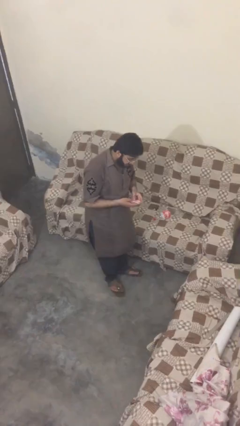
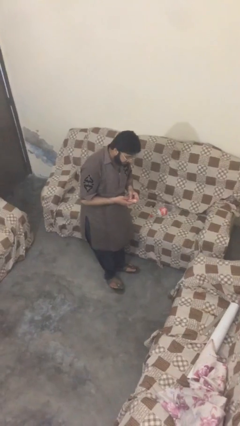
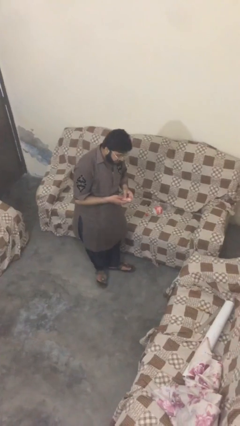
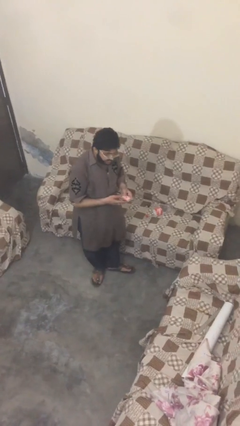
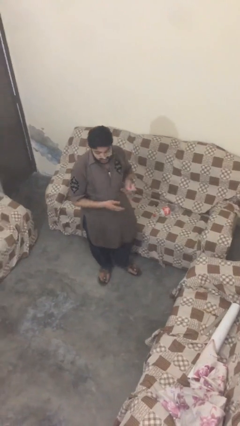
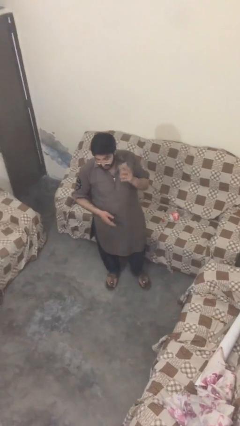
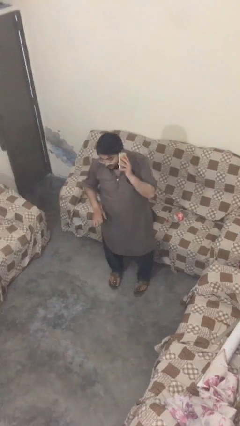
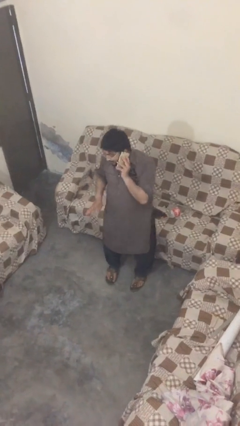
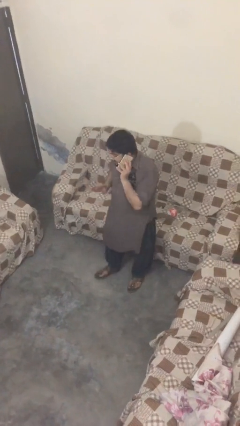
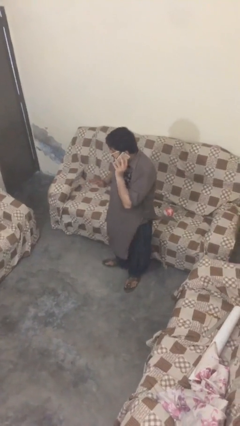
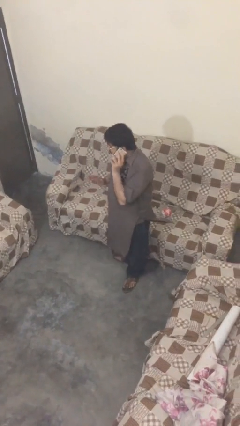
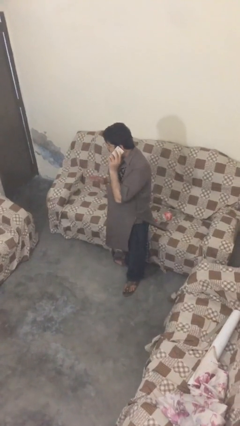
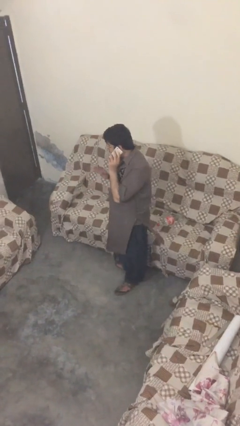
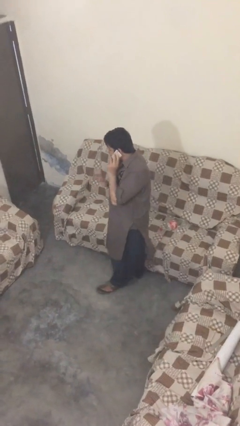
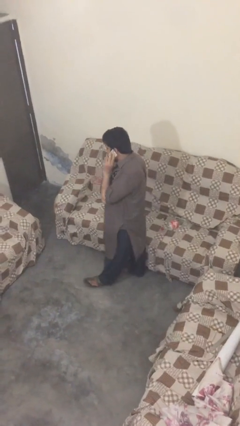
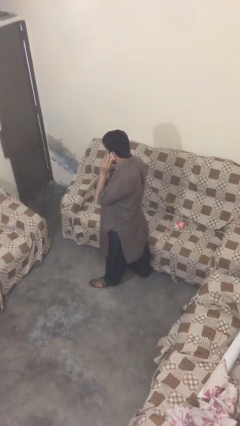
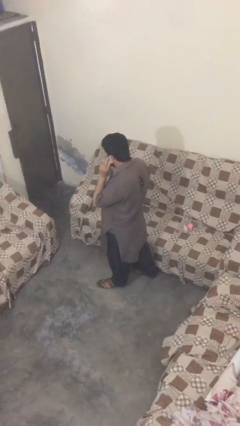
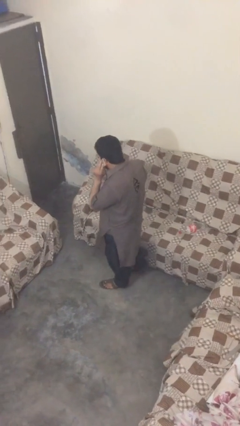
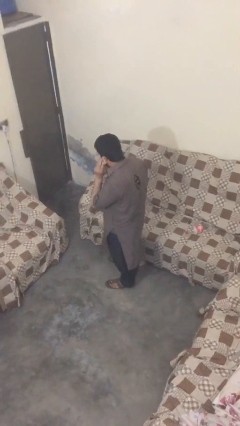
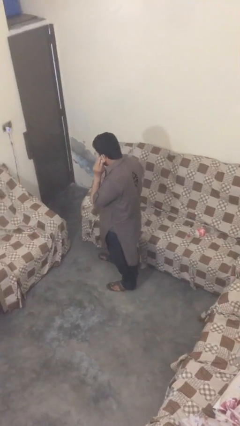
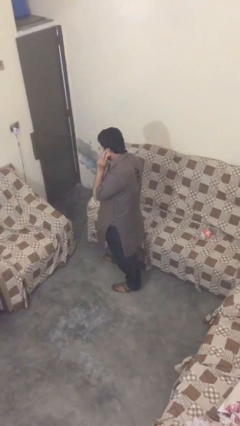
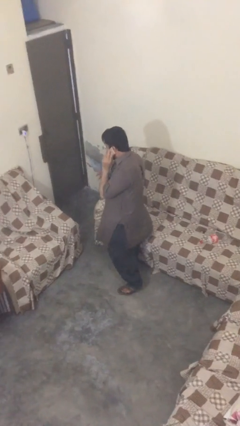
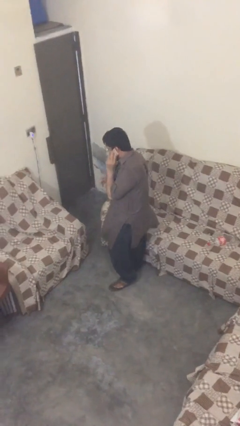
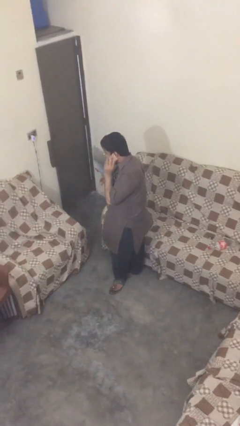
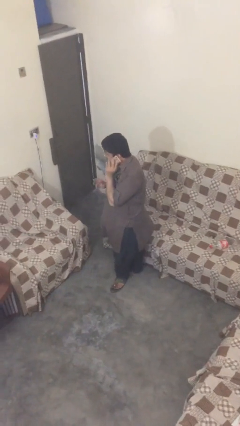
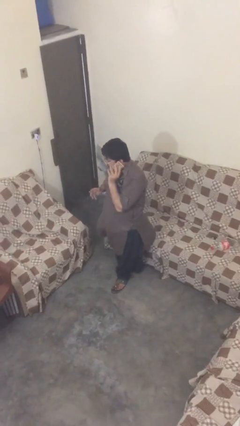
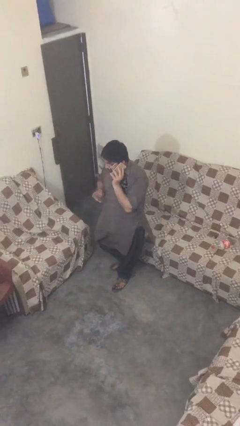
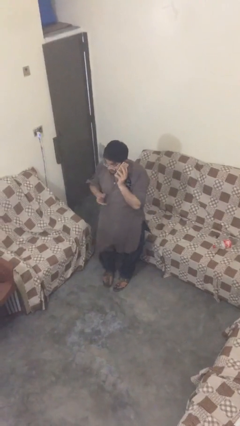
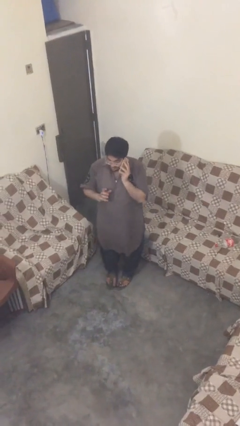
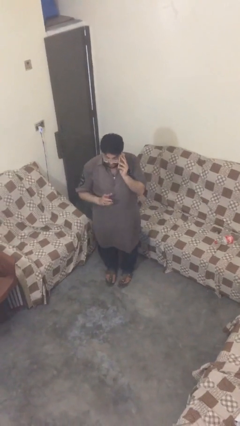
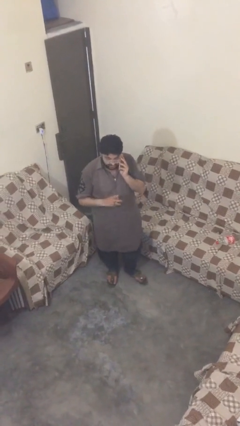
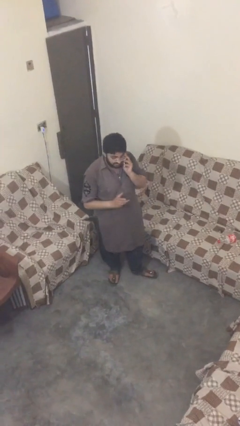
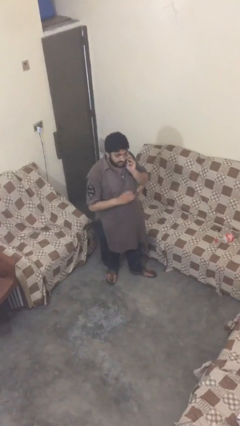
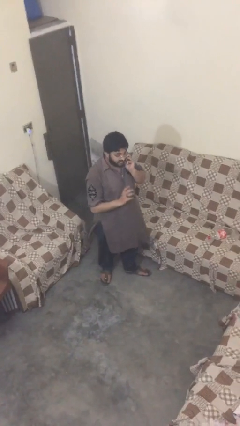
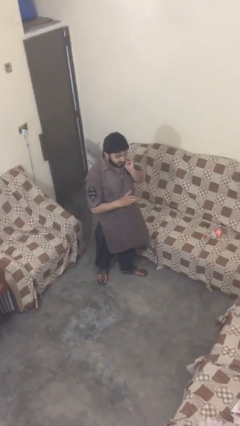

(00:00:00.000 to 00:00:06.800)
person talks on phone

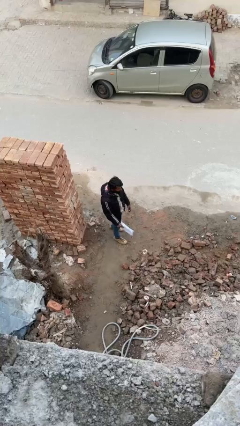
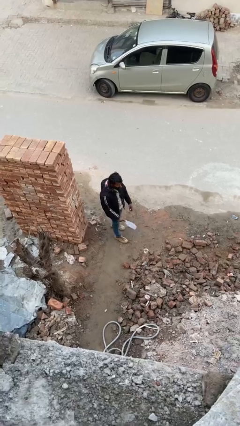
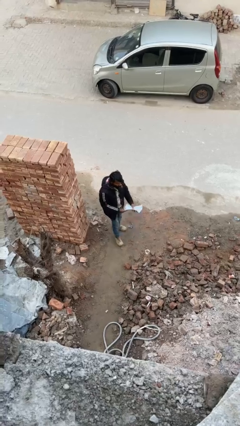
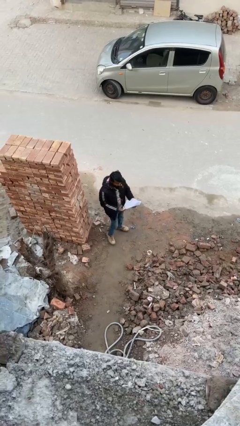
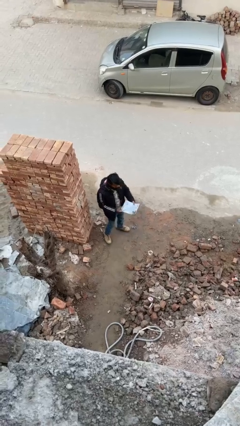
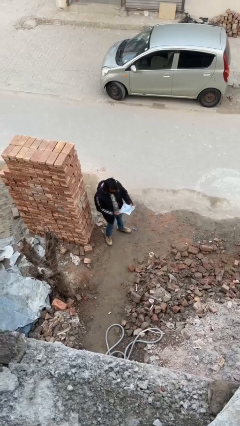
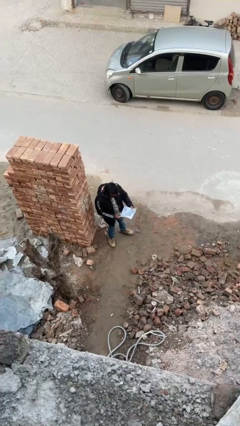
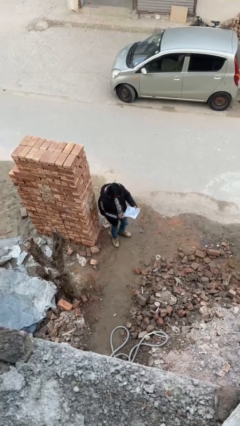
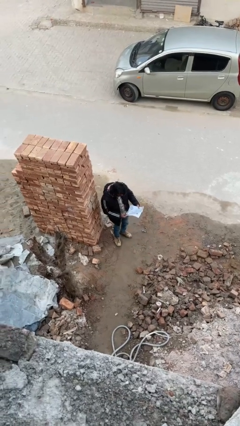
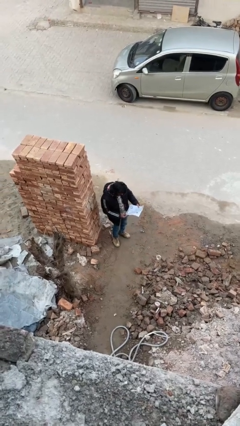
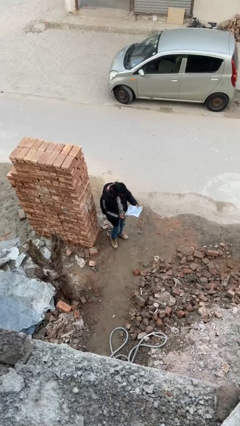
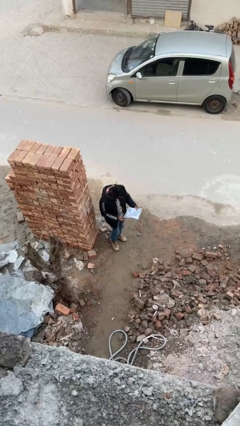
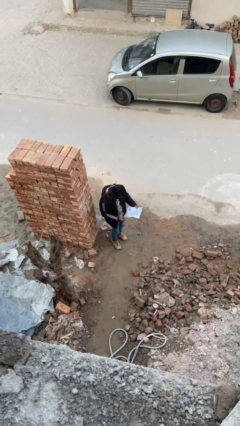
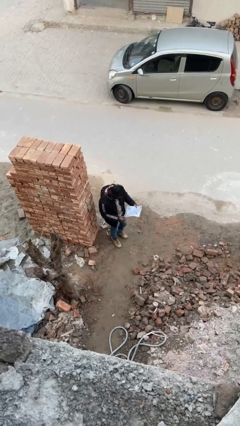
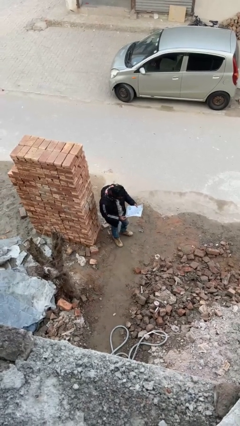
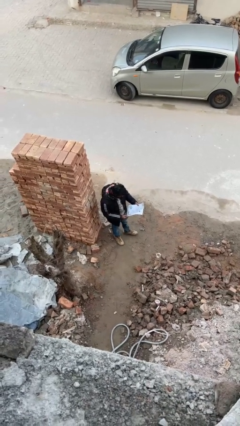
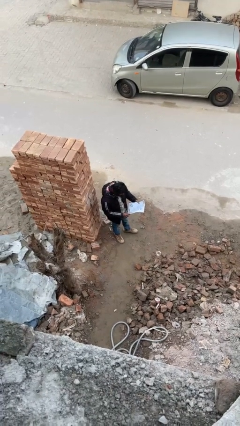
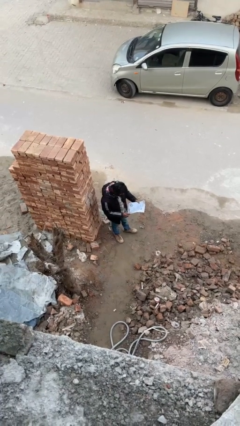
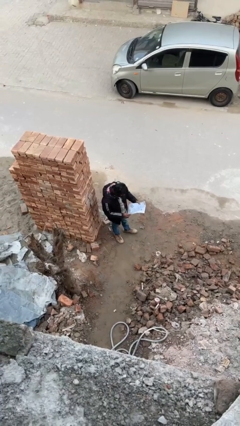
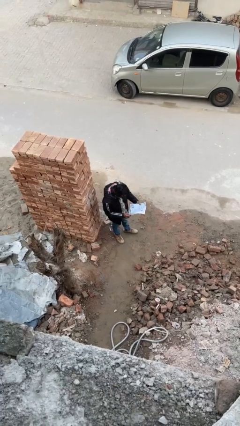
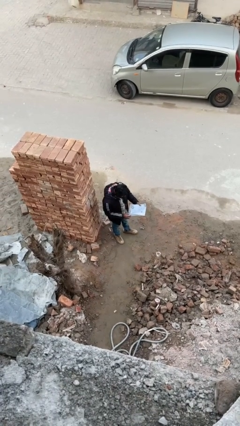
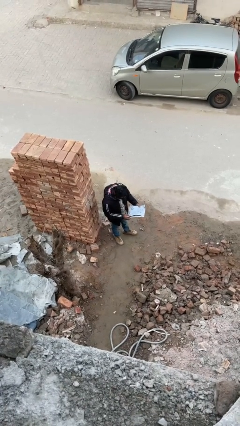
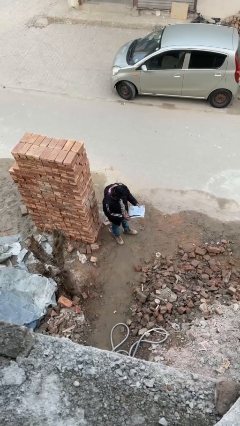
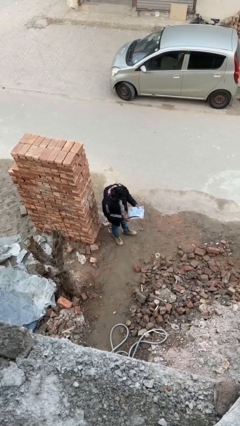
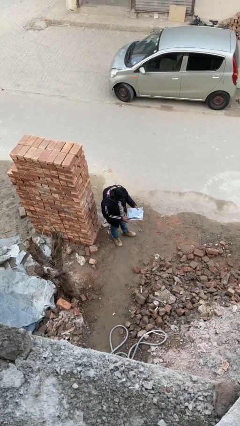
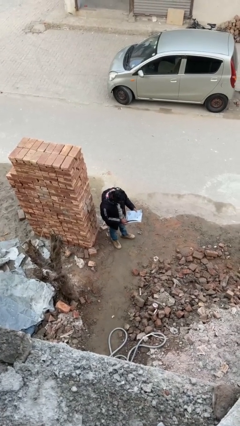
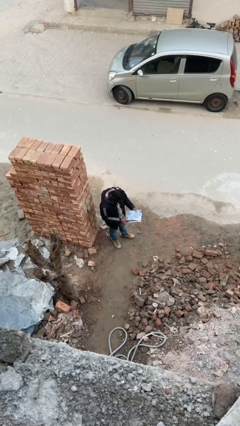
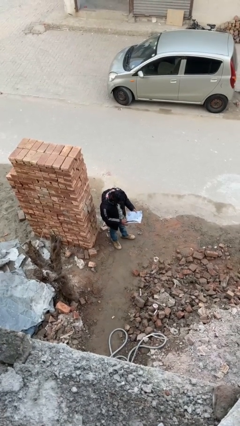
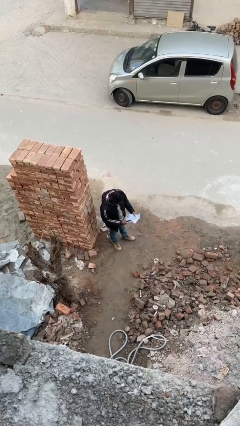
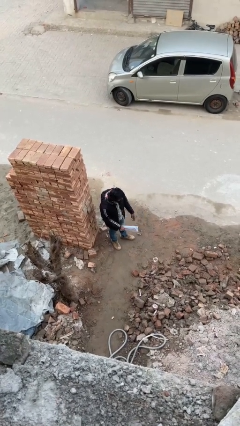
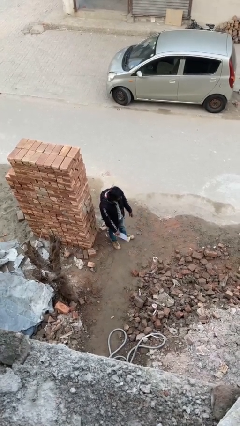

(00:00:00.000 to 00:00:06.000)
person reads document

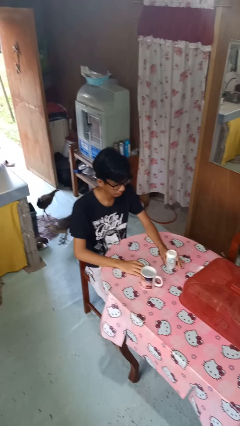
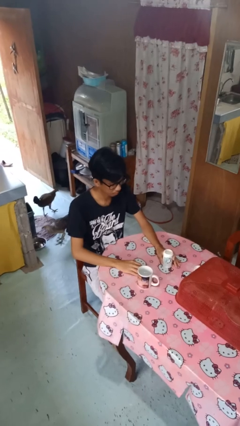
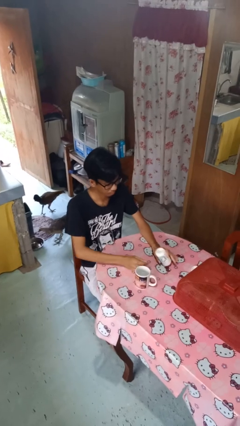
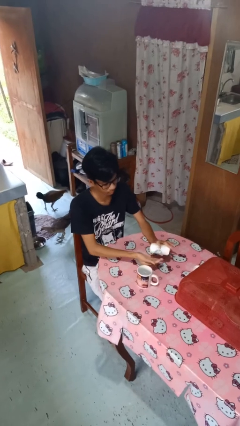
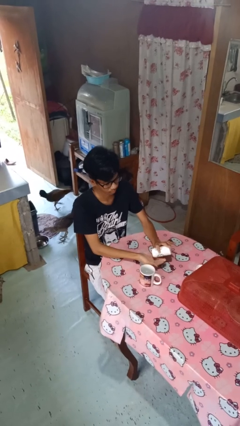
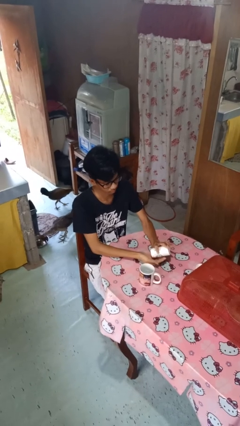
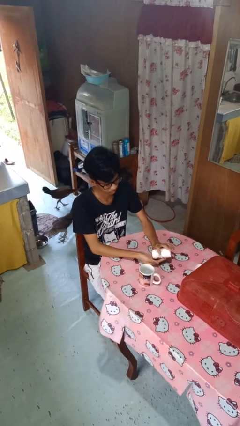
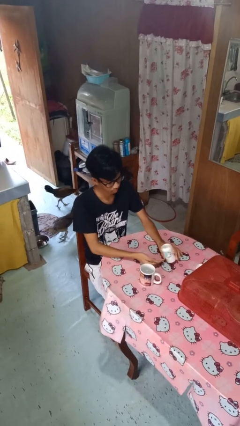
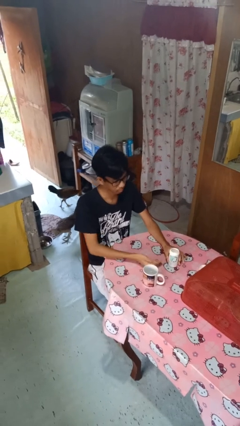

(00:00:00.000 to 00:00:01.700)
person takes medicine pills

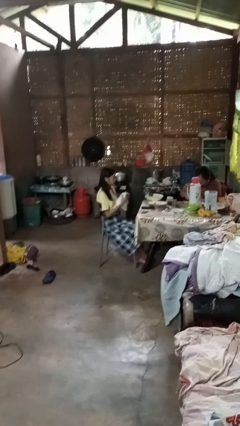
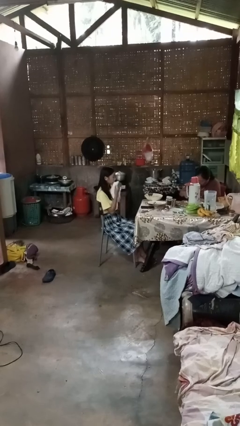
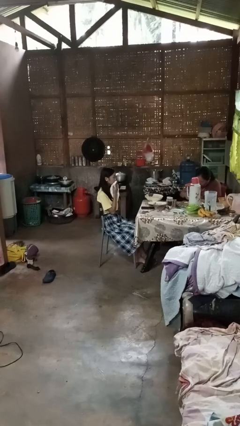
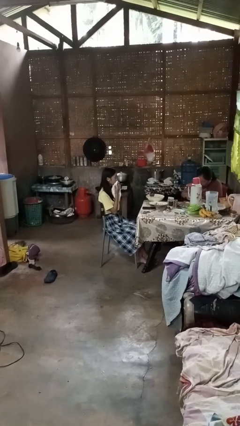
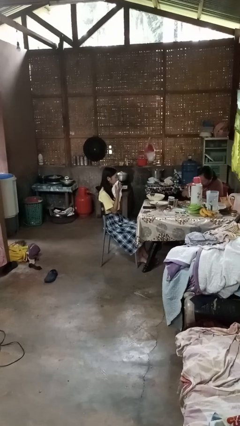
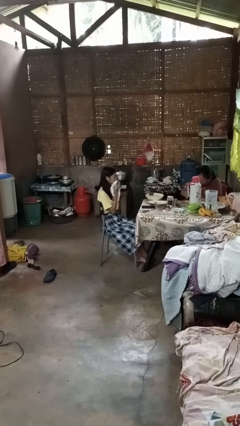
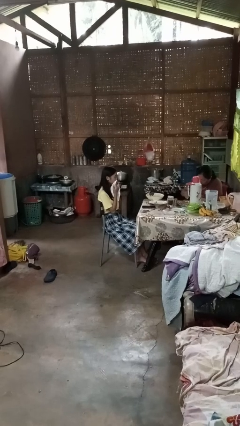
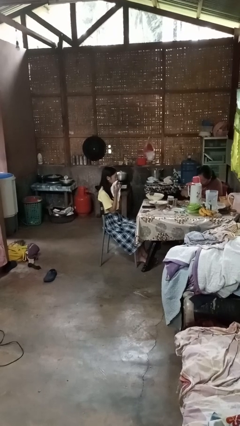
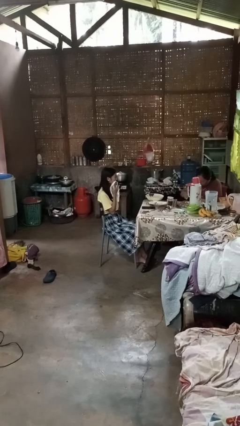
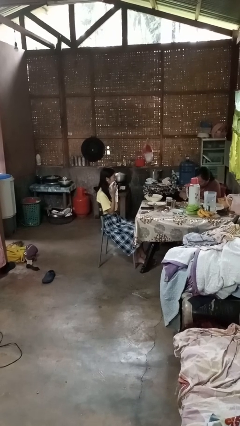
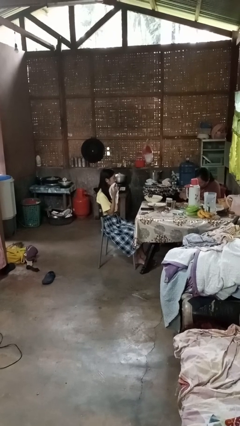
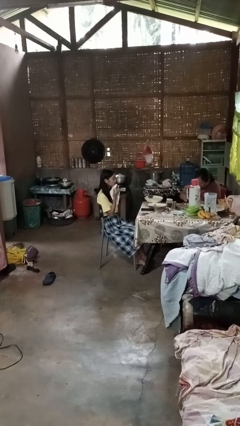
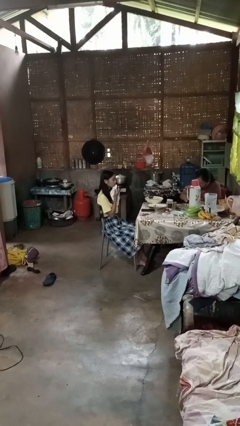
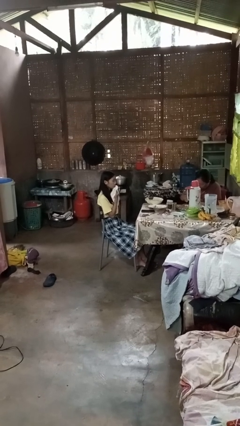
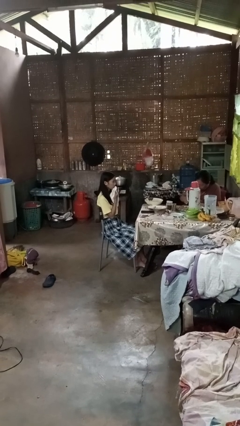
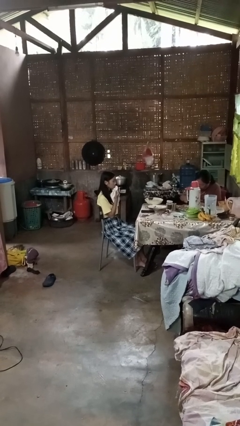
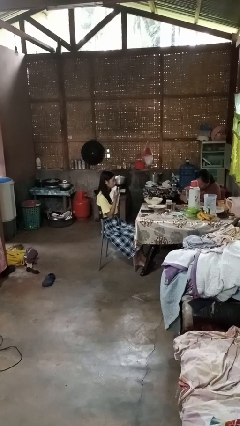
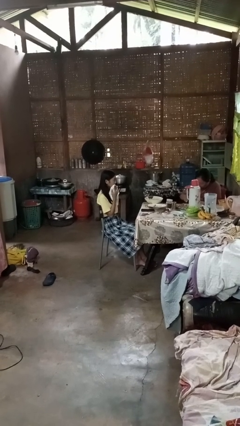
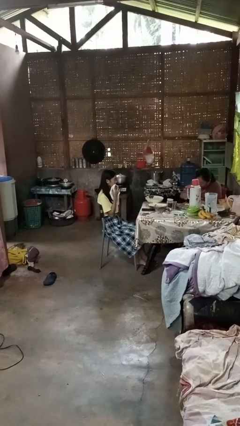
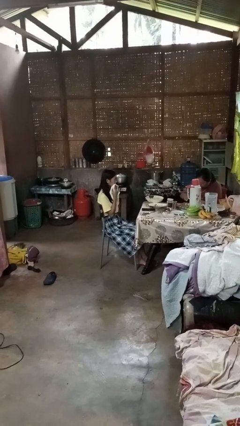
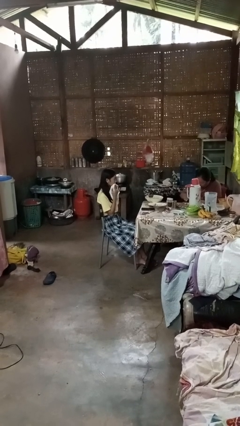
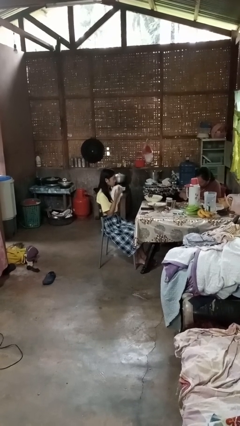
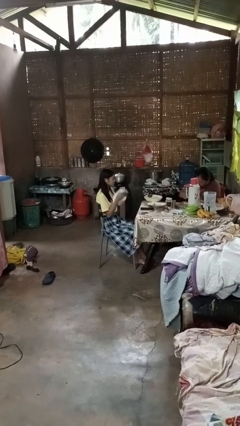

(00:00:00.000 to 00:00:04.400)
person wipes mouth with napkin
